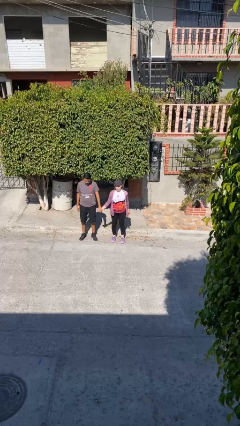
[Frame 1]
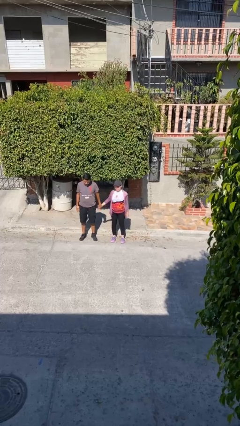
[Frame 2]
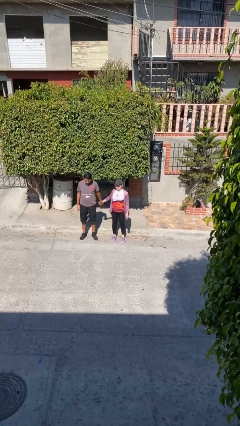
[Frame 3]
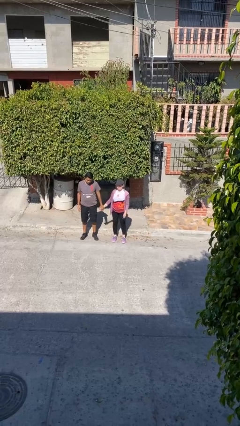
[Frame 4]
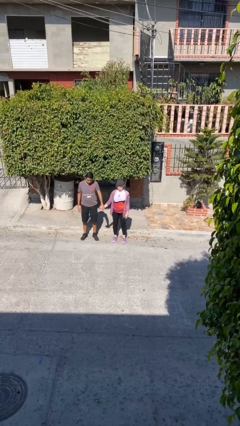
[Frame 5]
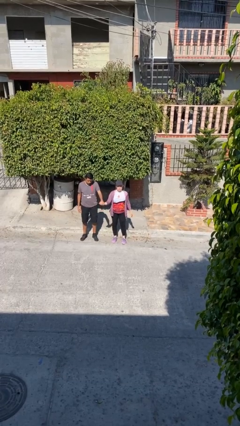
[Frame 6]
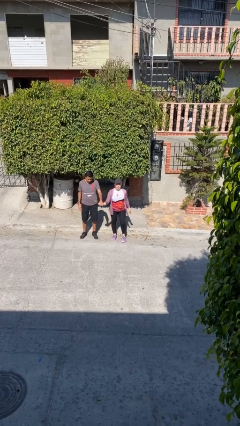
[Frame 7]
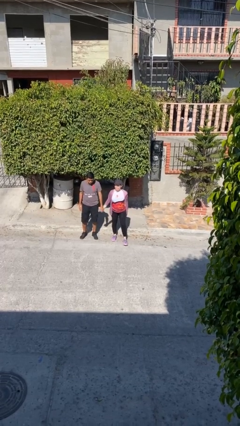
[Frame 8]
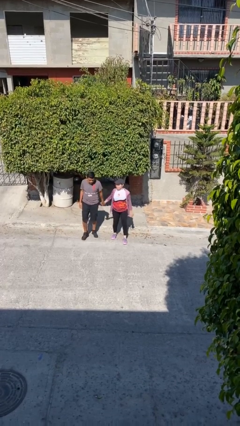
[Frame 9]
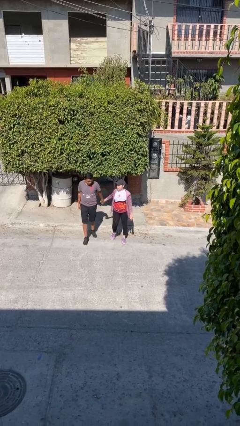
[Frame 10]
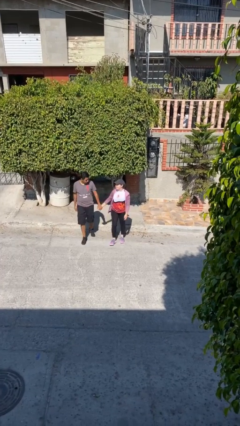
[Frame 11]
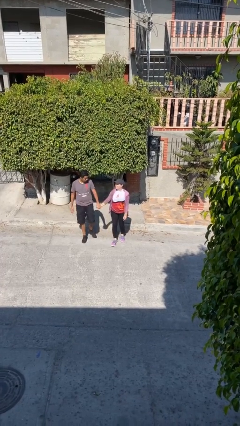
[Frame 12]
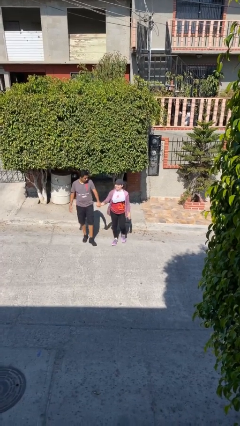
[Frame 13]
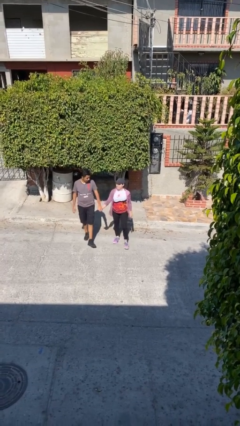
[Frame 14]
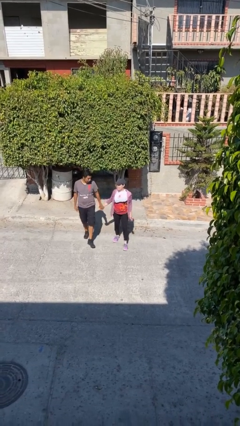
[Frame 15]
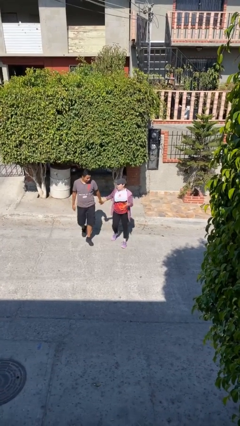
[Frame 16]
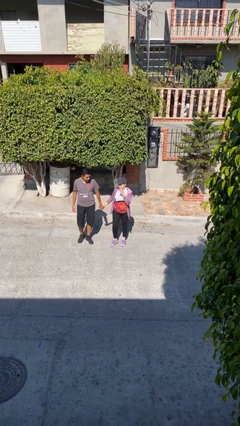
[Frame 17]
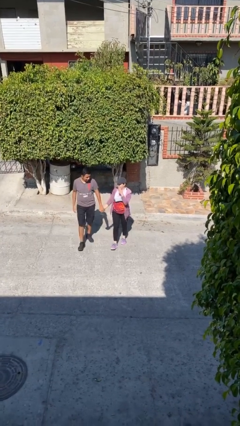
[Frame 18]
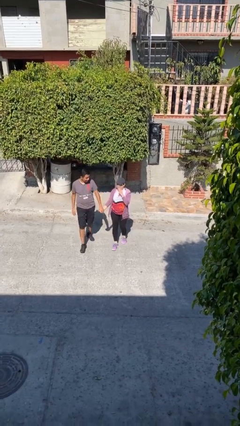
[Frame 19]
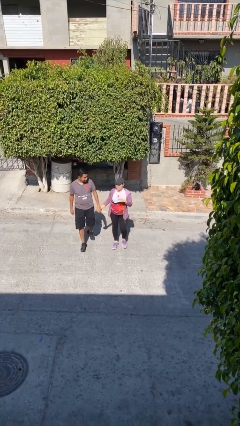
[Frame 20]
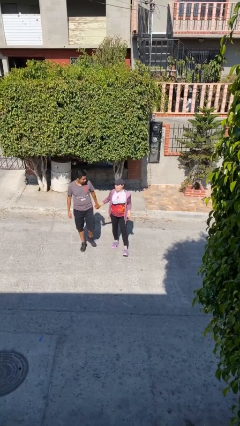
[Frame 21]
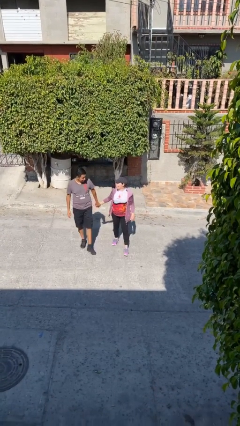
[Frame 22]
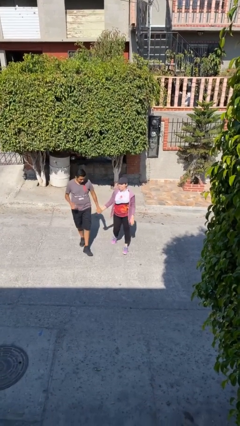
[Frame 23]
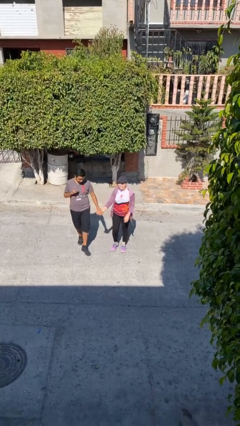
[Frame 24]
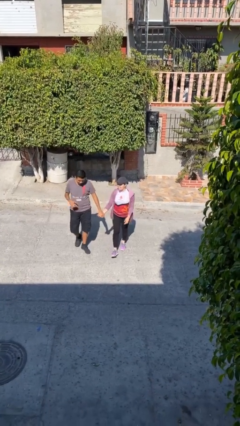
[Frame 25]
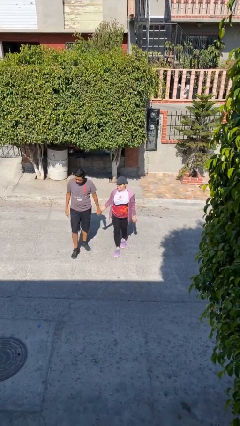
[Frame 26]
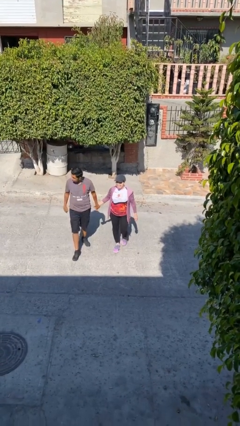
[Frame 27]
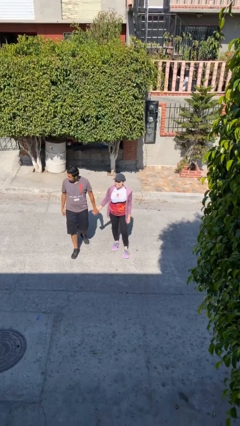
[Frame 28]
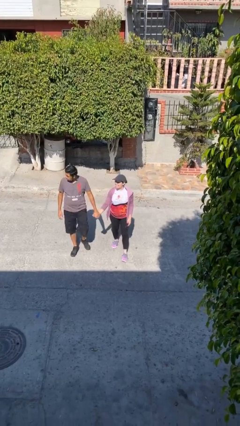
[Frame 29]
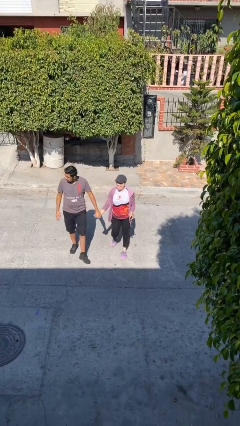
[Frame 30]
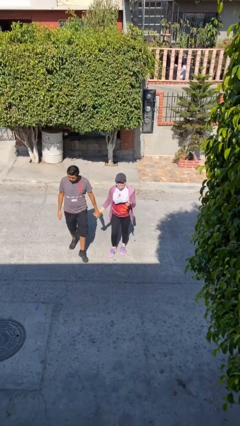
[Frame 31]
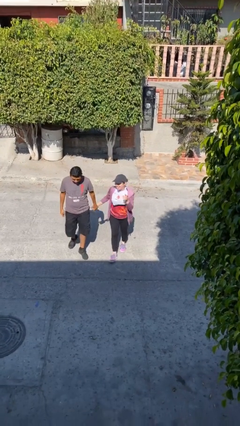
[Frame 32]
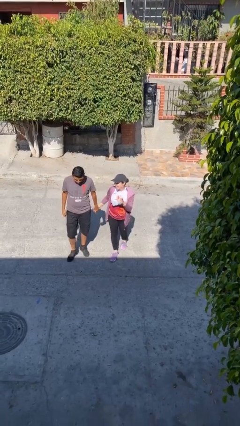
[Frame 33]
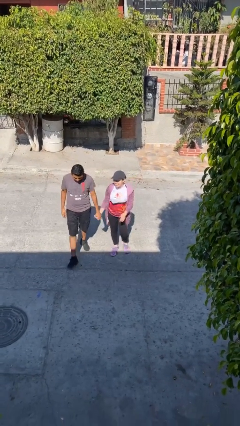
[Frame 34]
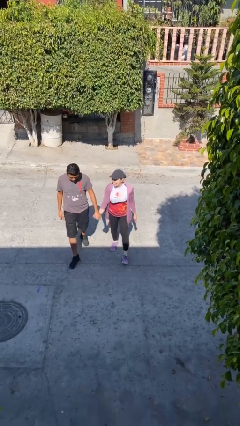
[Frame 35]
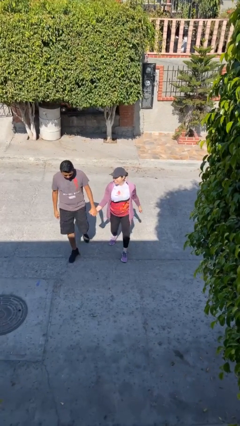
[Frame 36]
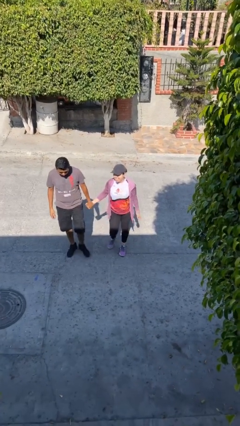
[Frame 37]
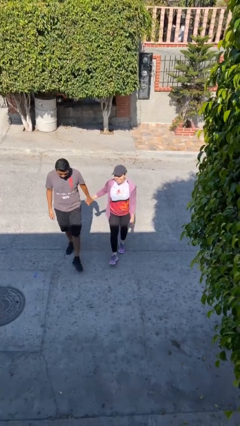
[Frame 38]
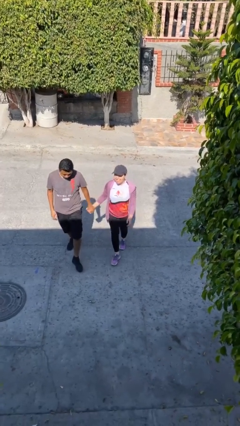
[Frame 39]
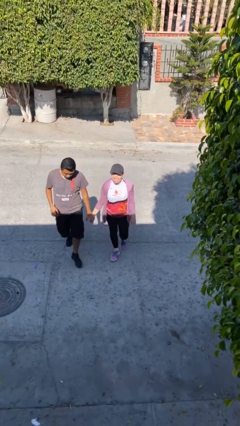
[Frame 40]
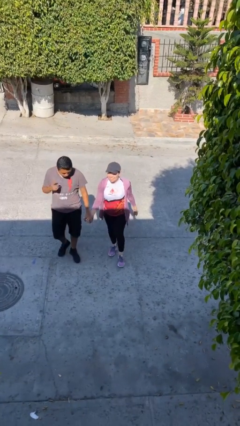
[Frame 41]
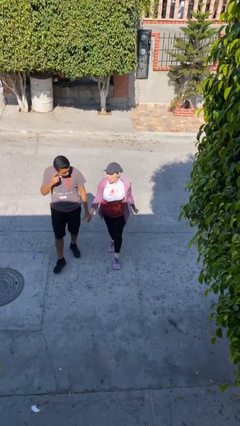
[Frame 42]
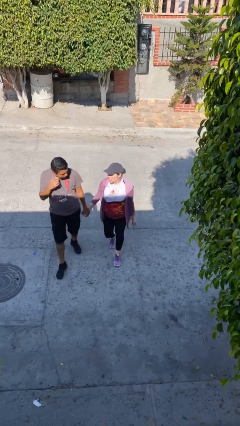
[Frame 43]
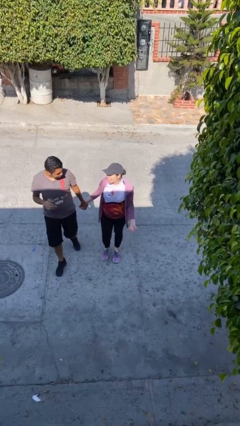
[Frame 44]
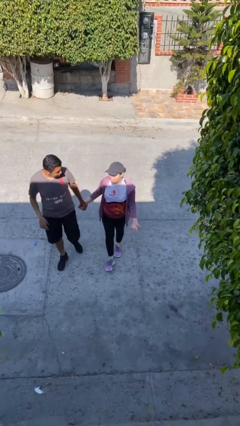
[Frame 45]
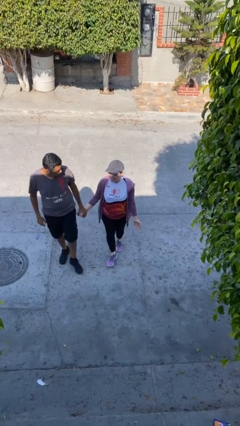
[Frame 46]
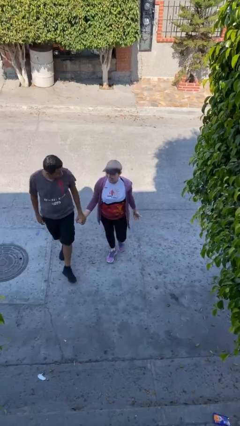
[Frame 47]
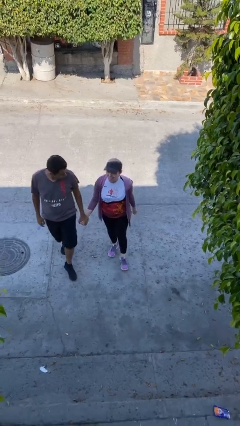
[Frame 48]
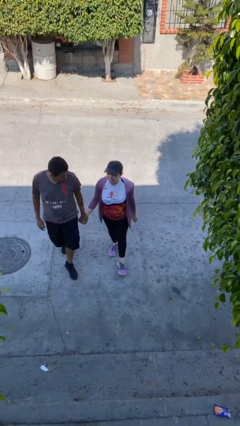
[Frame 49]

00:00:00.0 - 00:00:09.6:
person holds hand

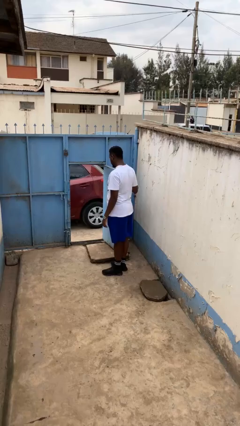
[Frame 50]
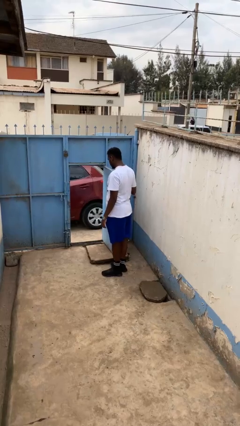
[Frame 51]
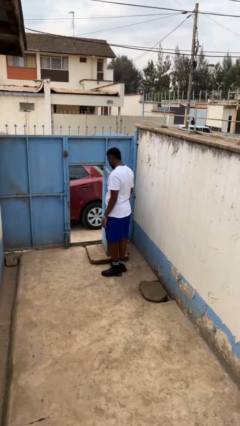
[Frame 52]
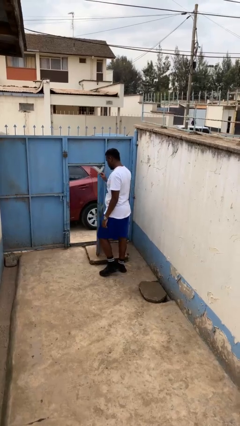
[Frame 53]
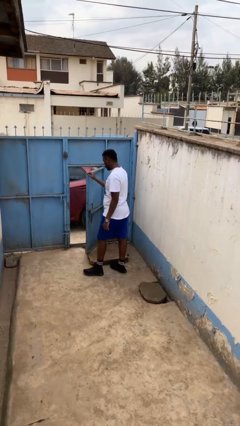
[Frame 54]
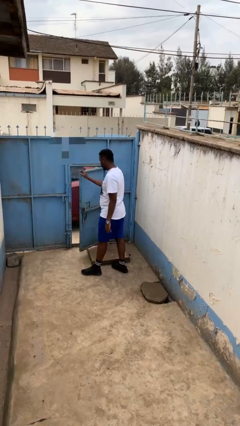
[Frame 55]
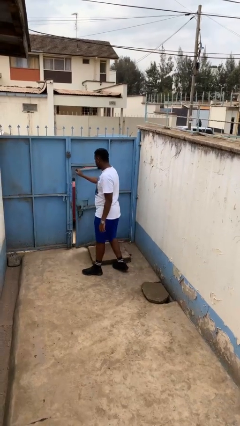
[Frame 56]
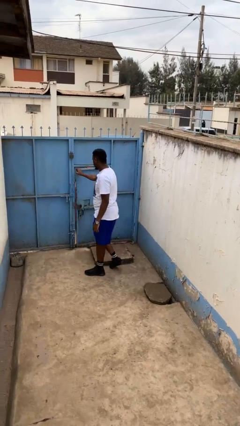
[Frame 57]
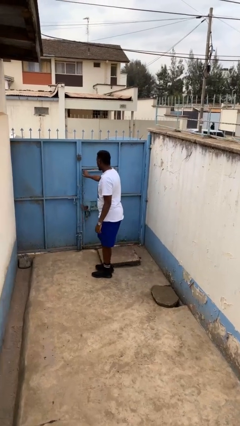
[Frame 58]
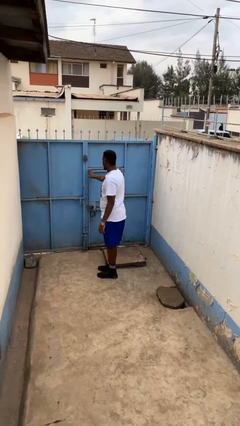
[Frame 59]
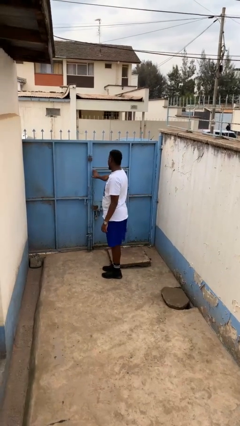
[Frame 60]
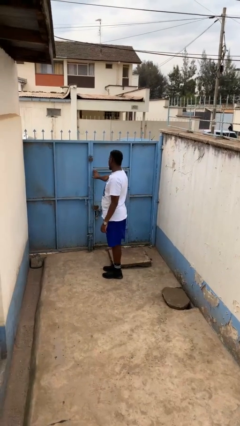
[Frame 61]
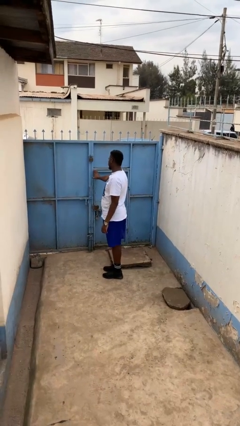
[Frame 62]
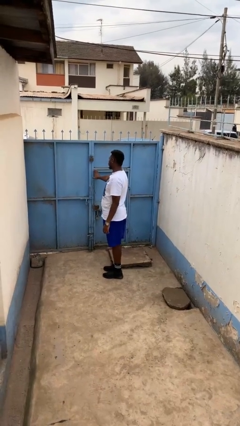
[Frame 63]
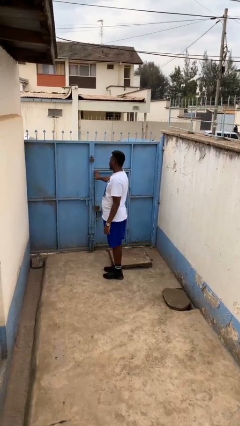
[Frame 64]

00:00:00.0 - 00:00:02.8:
person closes gate

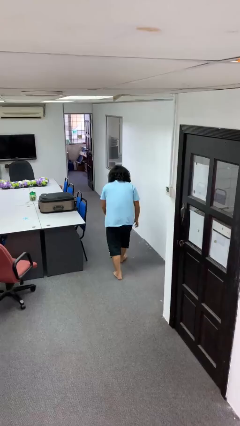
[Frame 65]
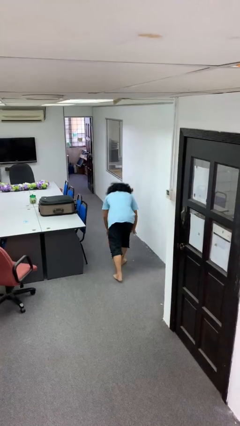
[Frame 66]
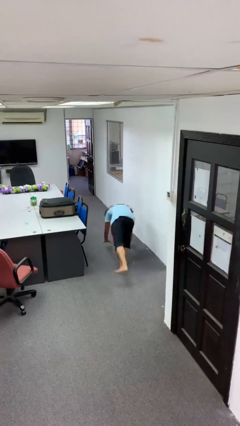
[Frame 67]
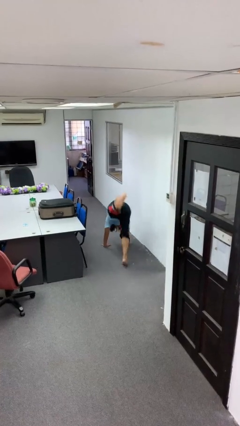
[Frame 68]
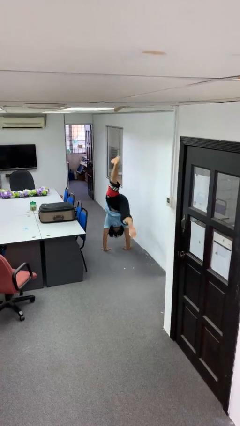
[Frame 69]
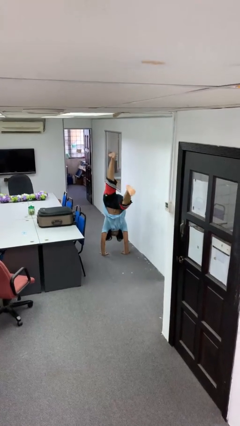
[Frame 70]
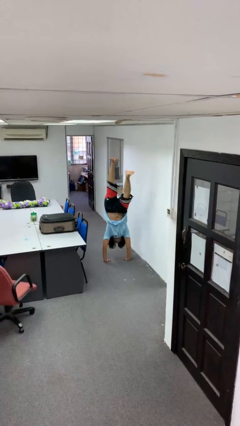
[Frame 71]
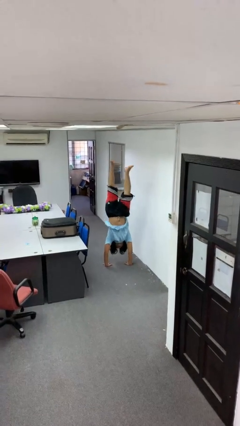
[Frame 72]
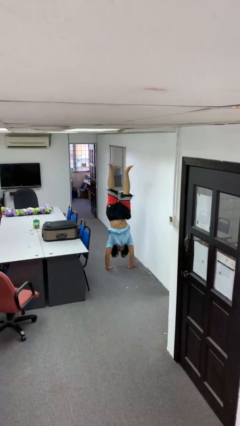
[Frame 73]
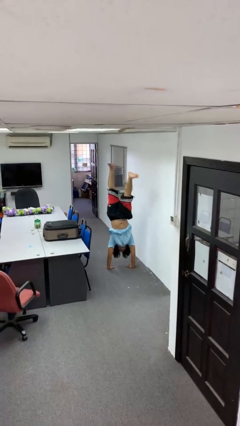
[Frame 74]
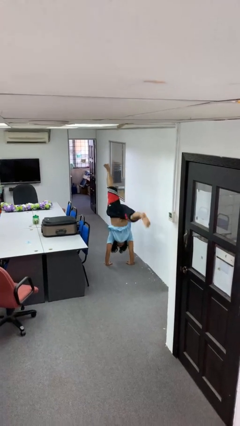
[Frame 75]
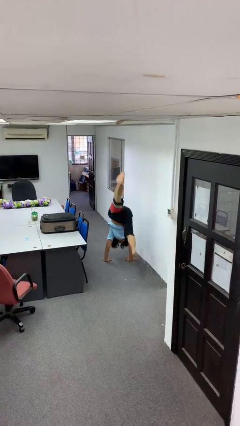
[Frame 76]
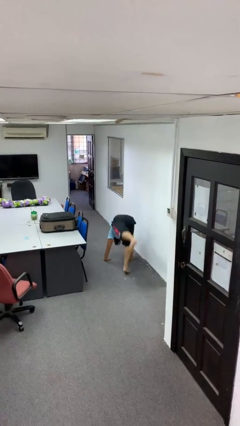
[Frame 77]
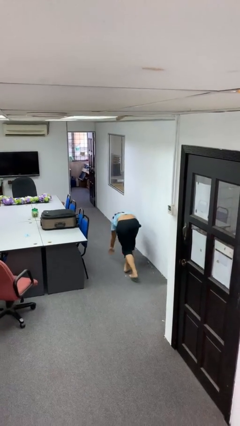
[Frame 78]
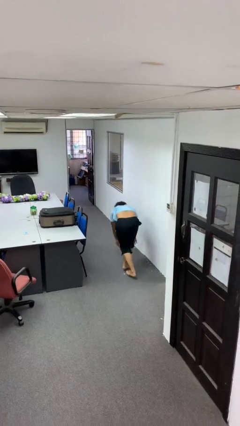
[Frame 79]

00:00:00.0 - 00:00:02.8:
person handstand

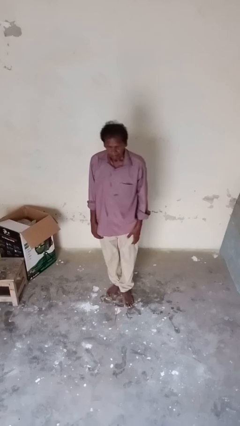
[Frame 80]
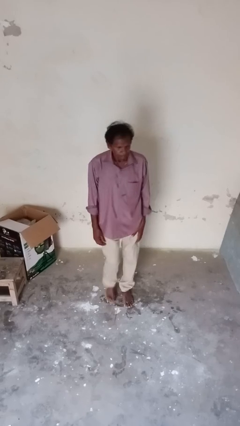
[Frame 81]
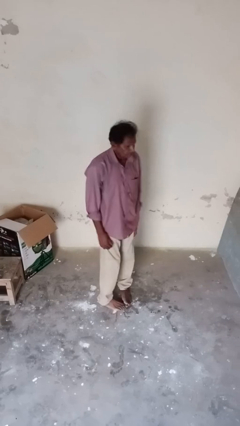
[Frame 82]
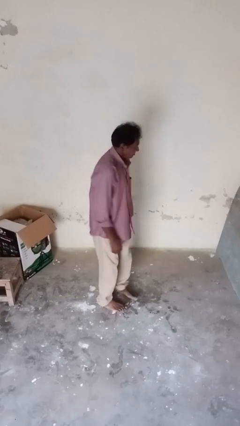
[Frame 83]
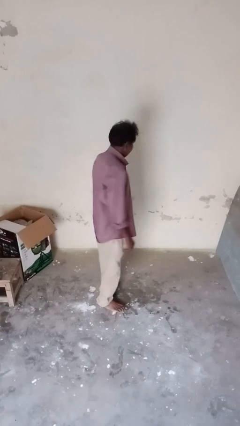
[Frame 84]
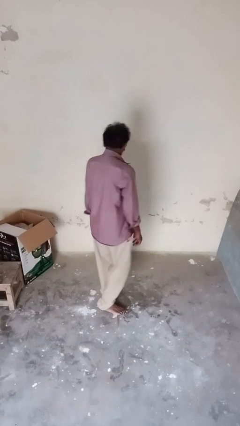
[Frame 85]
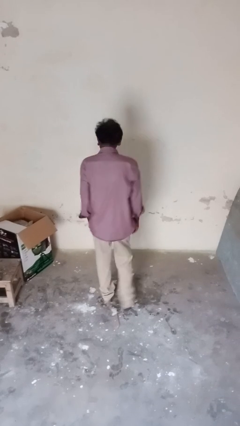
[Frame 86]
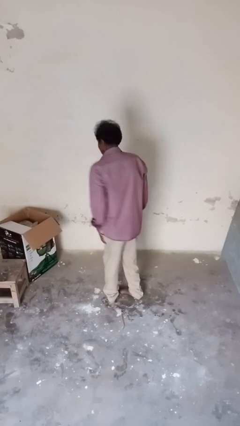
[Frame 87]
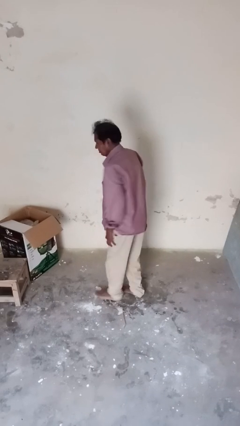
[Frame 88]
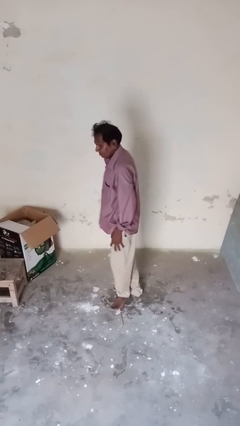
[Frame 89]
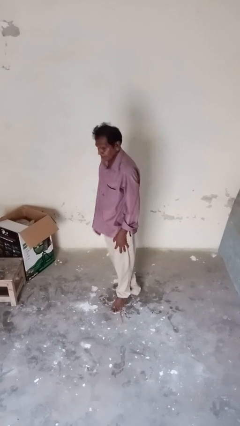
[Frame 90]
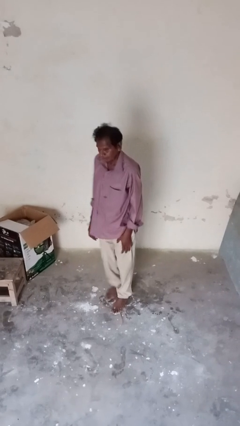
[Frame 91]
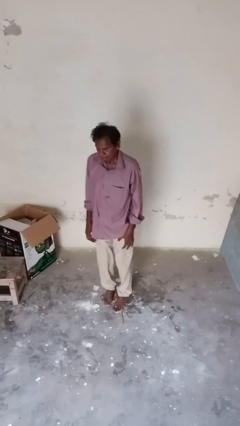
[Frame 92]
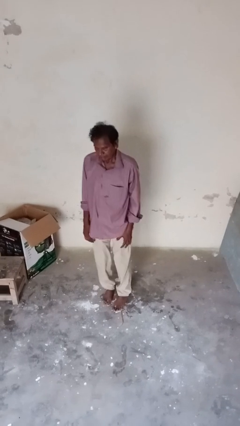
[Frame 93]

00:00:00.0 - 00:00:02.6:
person twirls
